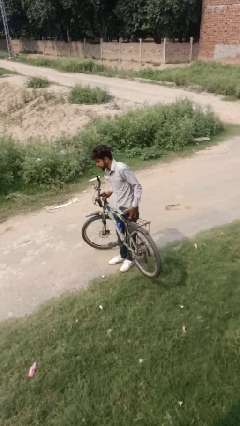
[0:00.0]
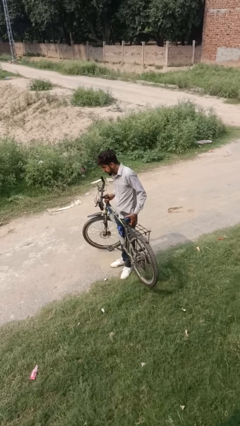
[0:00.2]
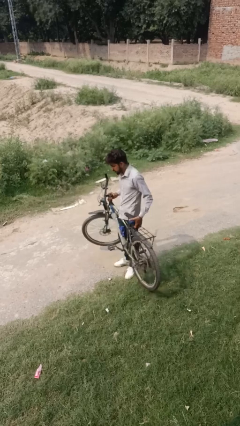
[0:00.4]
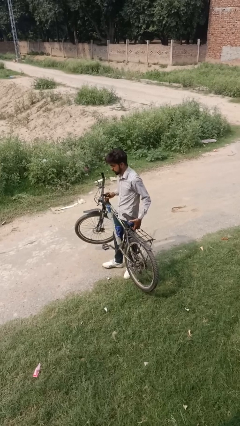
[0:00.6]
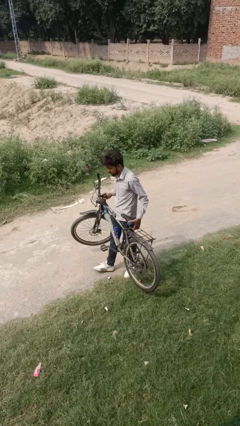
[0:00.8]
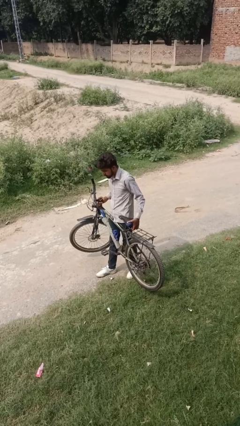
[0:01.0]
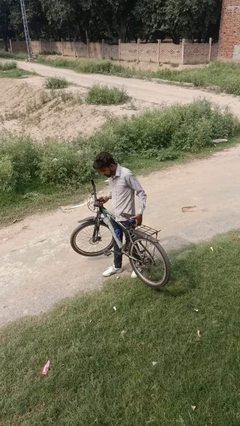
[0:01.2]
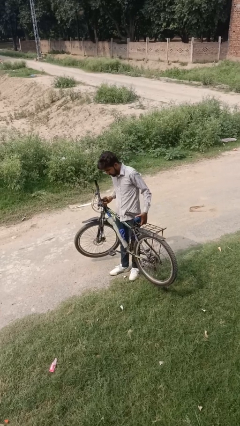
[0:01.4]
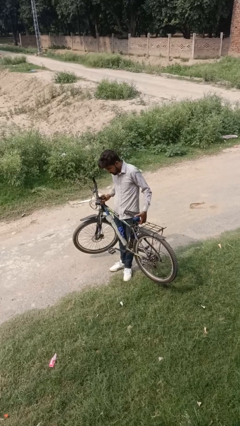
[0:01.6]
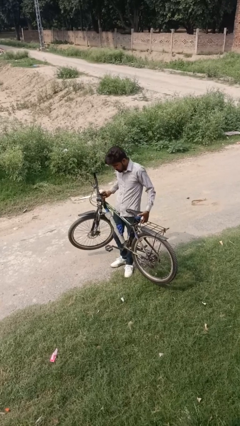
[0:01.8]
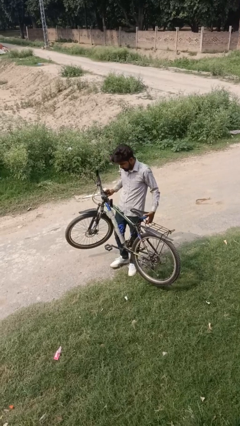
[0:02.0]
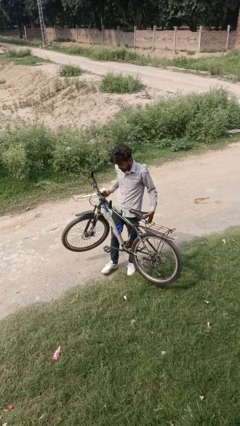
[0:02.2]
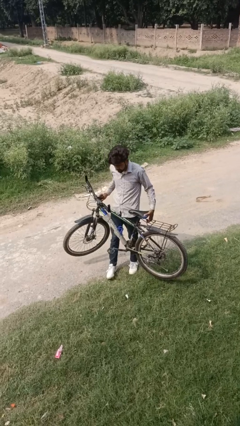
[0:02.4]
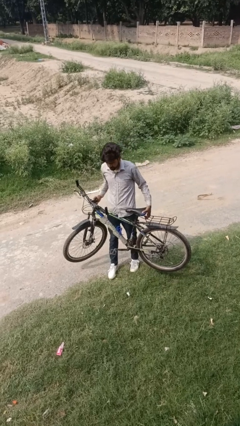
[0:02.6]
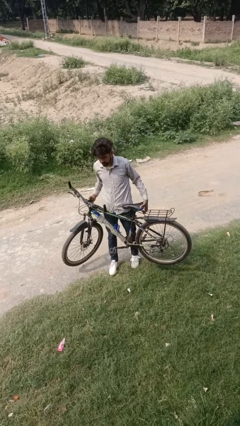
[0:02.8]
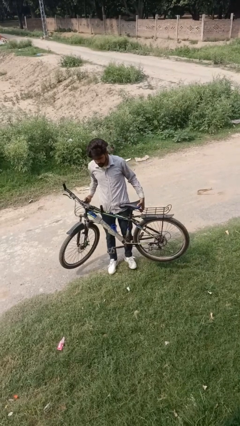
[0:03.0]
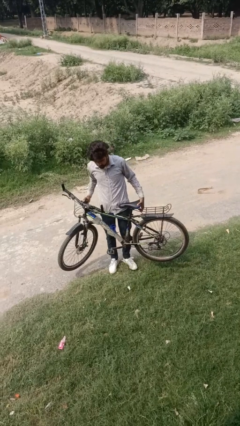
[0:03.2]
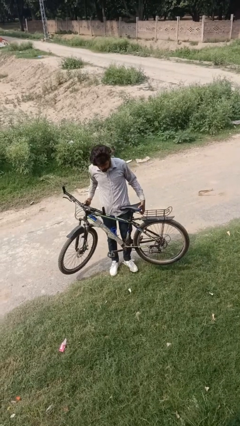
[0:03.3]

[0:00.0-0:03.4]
person carries bicycle

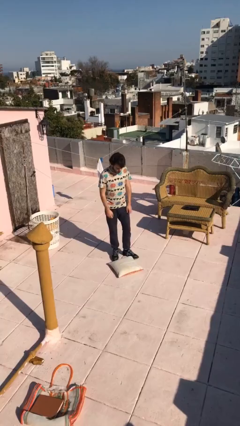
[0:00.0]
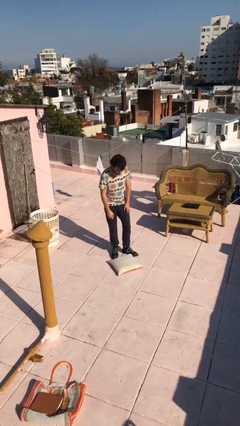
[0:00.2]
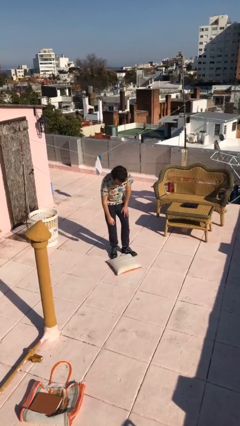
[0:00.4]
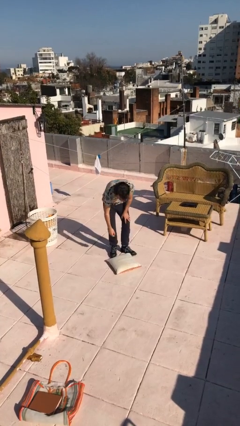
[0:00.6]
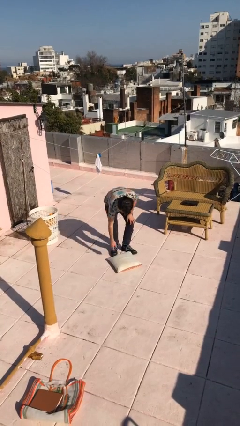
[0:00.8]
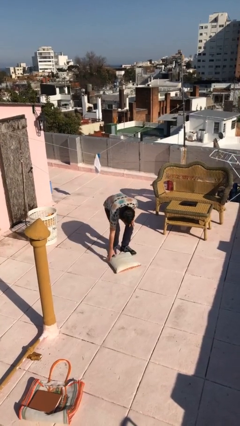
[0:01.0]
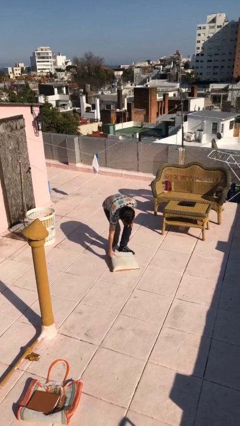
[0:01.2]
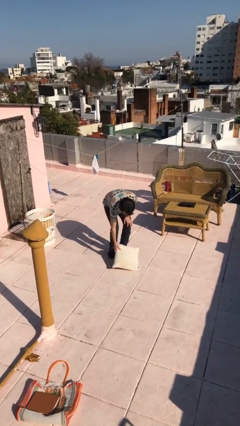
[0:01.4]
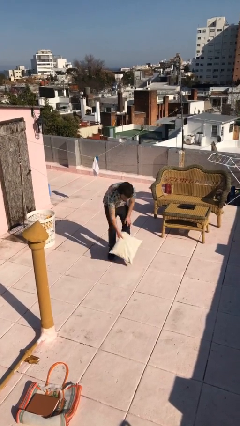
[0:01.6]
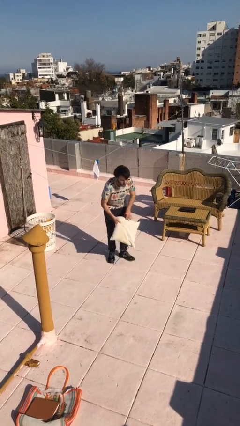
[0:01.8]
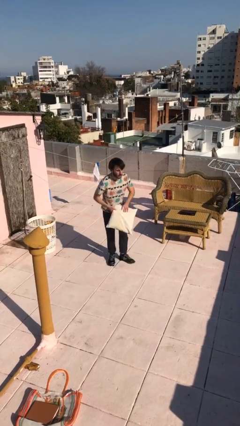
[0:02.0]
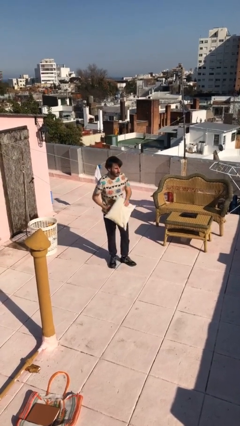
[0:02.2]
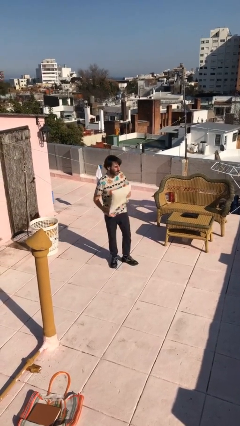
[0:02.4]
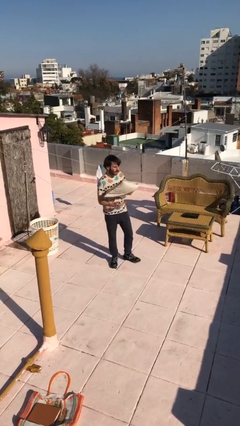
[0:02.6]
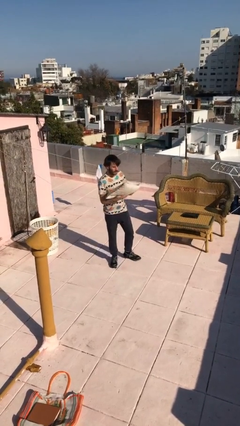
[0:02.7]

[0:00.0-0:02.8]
person picks up object from floor

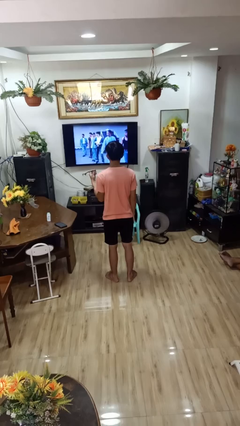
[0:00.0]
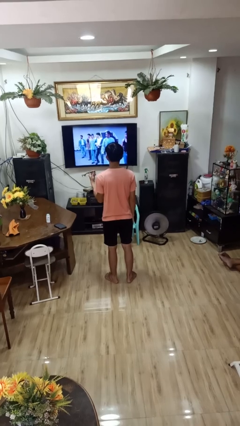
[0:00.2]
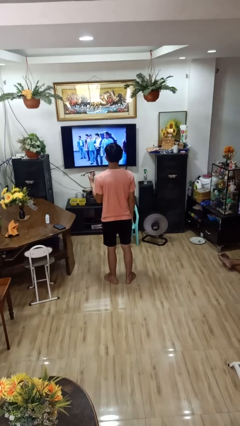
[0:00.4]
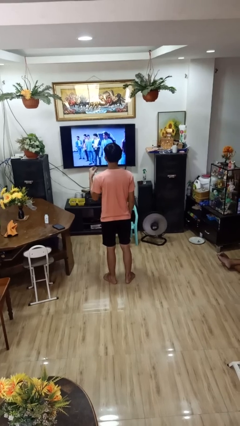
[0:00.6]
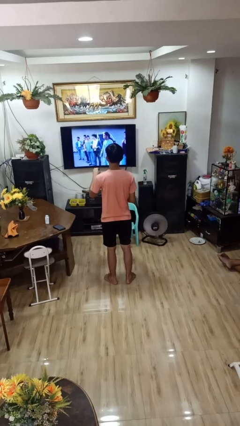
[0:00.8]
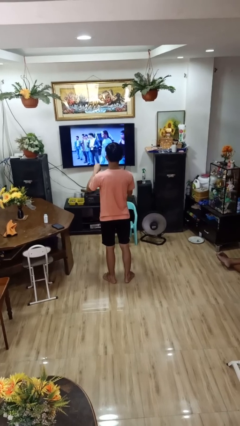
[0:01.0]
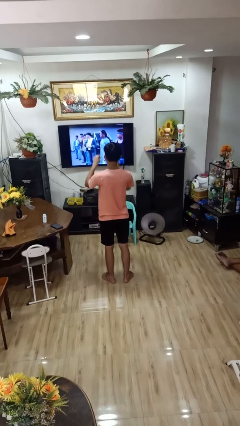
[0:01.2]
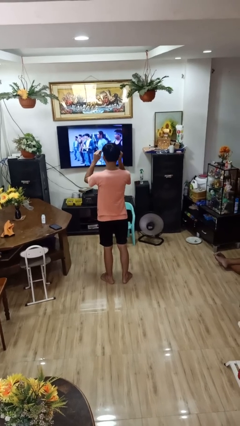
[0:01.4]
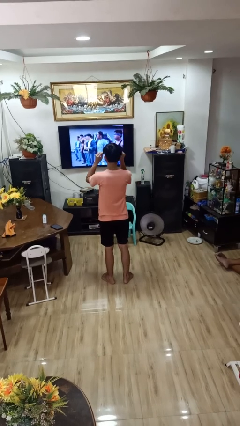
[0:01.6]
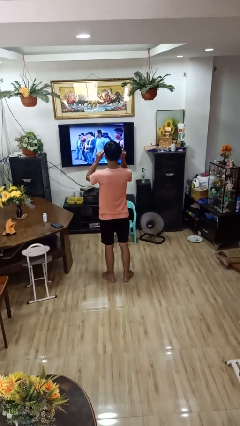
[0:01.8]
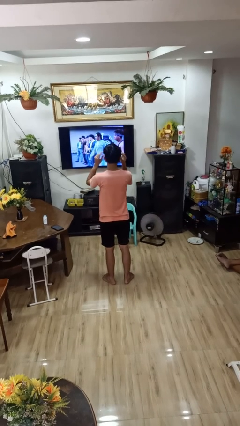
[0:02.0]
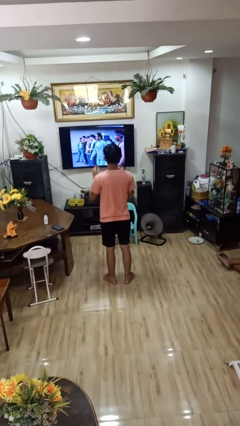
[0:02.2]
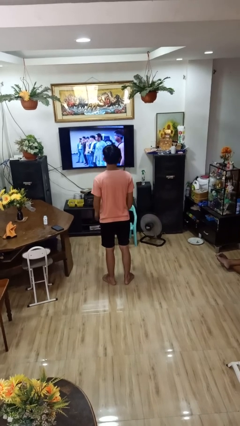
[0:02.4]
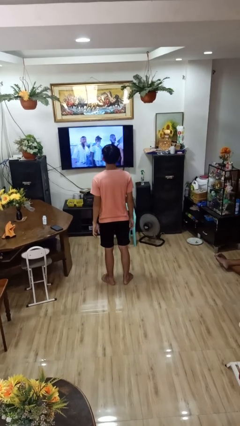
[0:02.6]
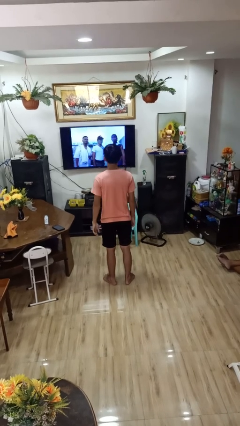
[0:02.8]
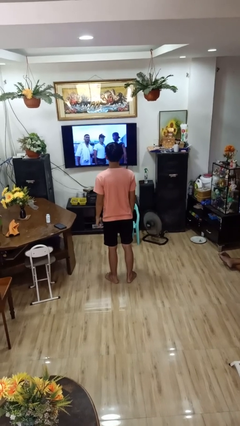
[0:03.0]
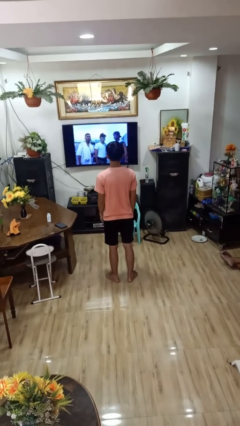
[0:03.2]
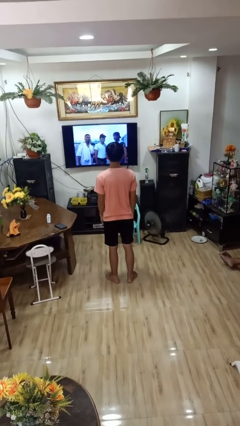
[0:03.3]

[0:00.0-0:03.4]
person puts on glasses

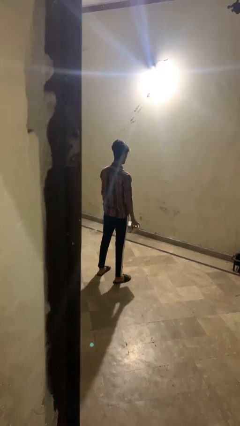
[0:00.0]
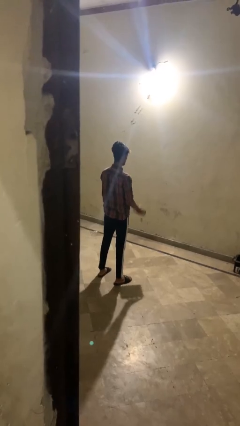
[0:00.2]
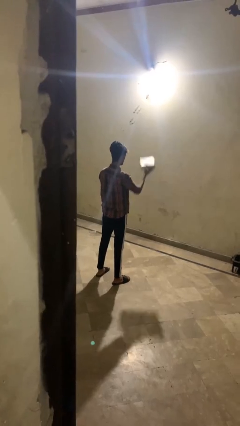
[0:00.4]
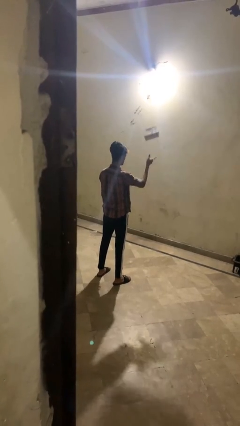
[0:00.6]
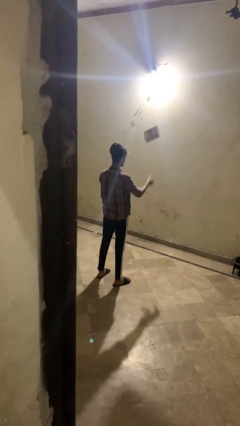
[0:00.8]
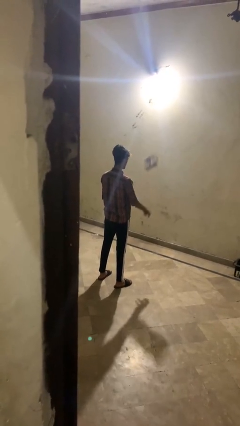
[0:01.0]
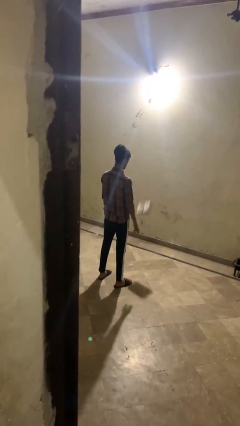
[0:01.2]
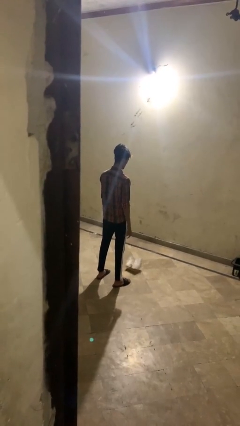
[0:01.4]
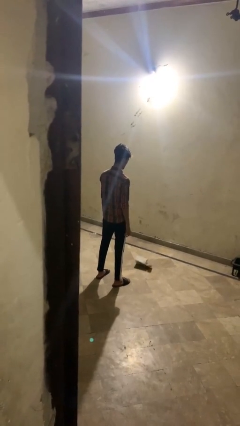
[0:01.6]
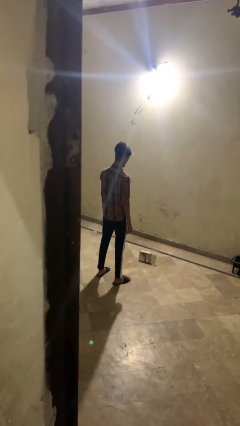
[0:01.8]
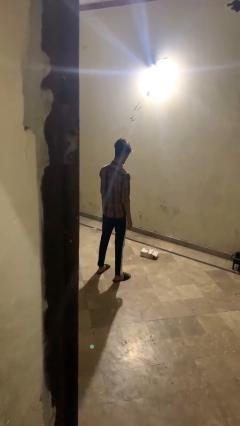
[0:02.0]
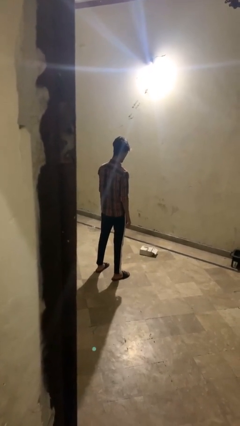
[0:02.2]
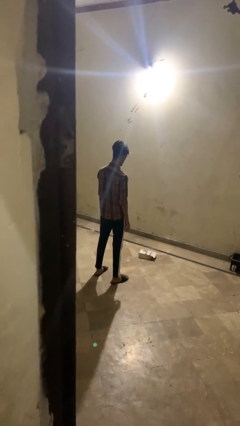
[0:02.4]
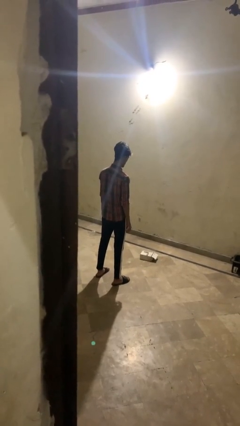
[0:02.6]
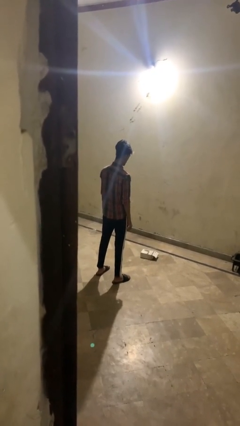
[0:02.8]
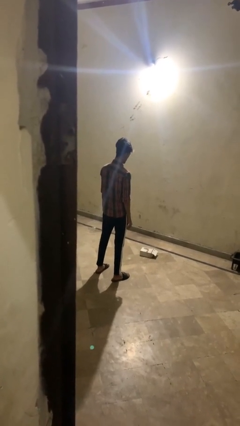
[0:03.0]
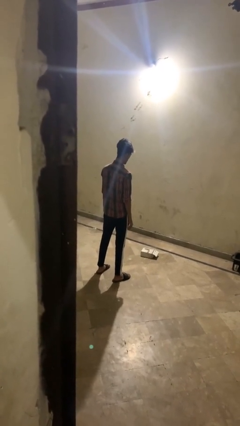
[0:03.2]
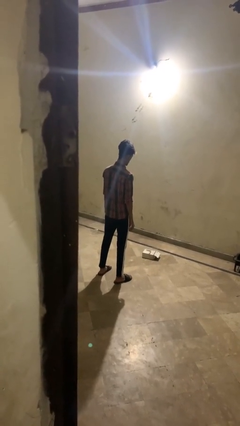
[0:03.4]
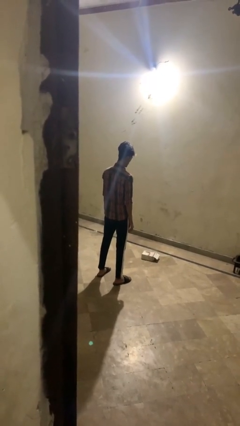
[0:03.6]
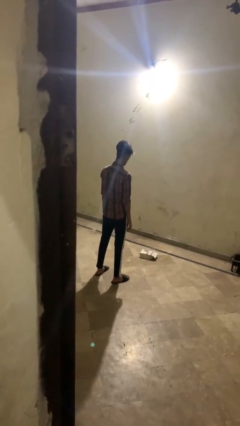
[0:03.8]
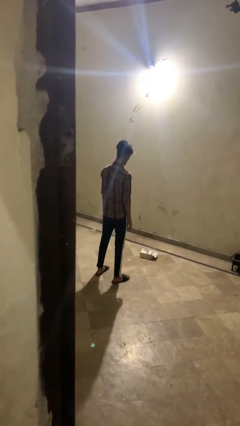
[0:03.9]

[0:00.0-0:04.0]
person throws object into air

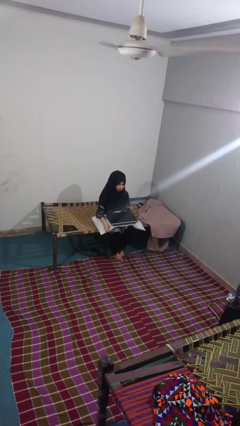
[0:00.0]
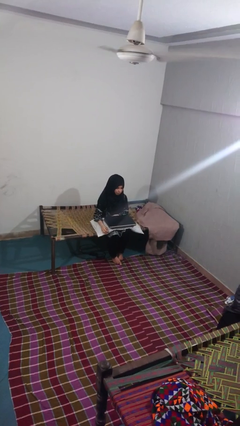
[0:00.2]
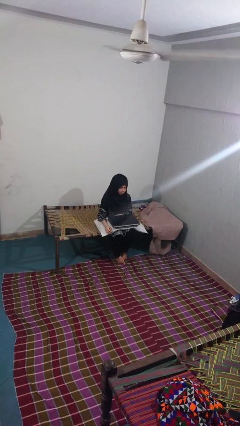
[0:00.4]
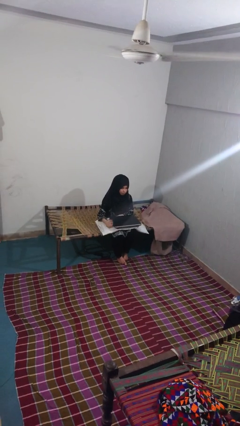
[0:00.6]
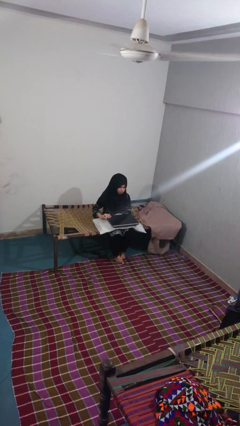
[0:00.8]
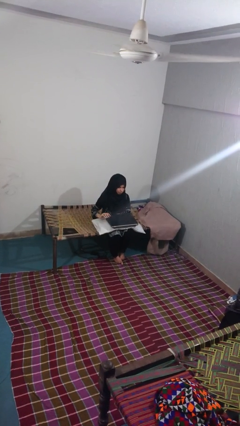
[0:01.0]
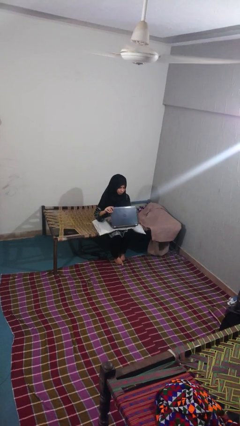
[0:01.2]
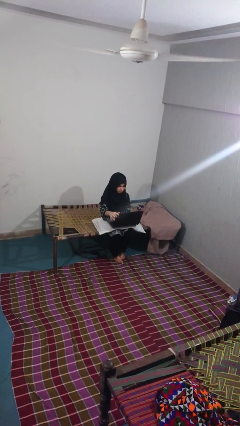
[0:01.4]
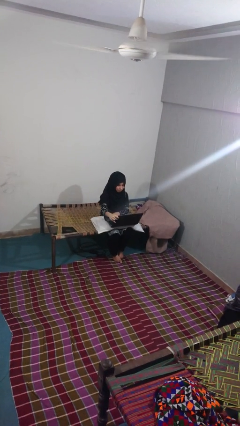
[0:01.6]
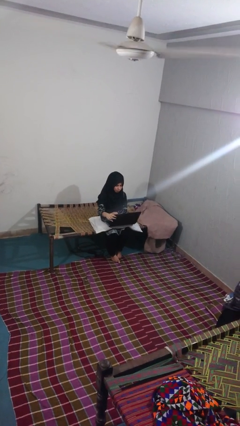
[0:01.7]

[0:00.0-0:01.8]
person opens laptop

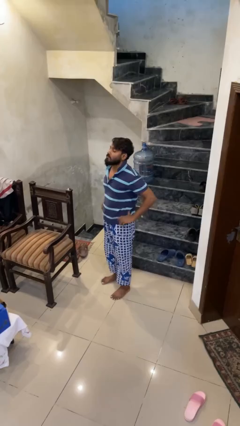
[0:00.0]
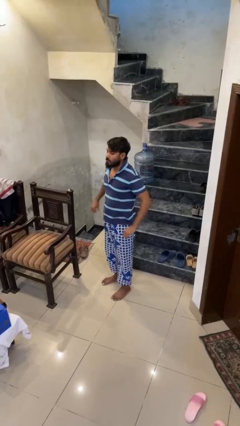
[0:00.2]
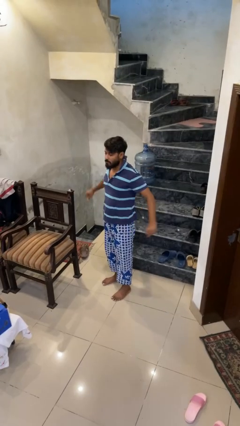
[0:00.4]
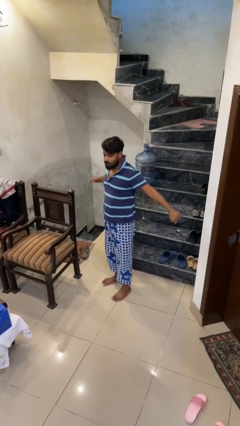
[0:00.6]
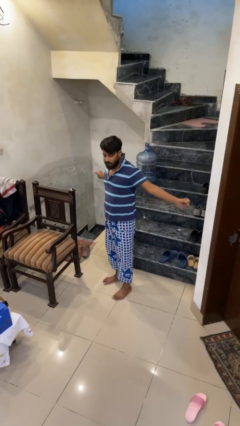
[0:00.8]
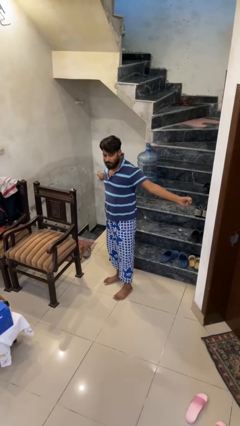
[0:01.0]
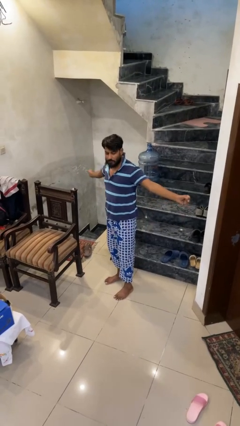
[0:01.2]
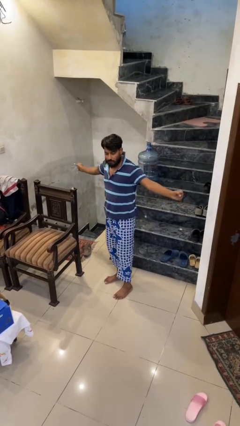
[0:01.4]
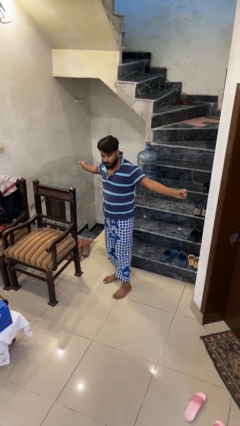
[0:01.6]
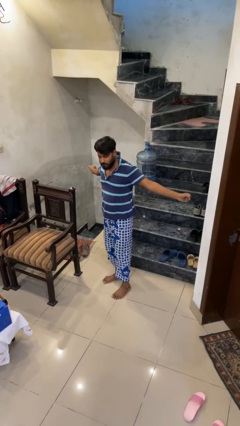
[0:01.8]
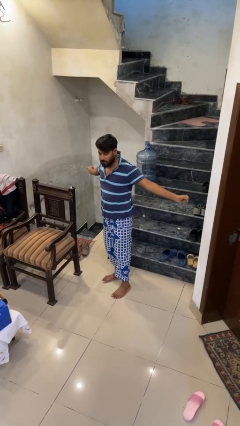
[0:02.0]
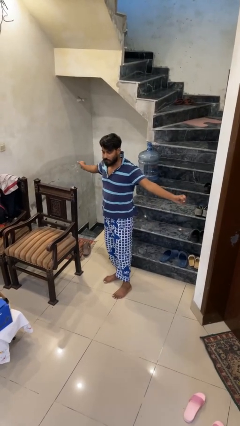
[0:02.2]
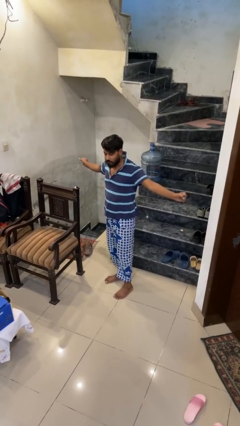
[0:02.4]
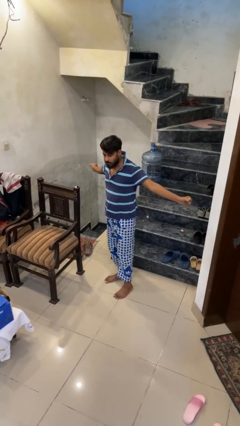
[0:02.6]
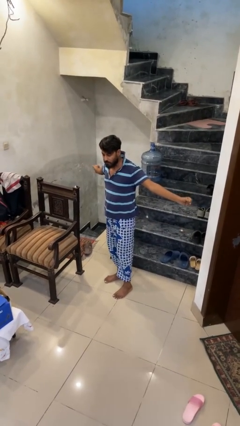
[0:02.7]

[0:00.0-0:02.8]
person stretches arms to side
